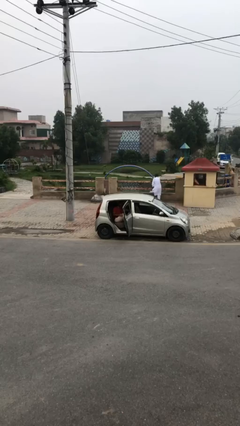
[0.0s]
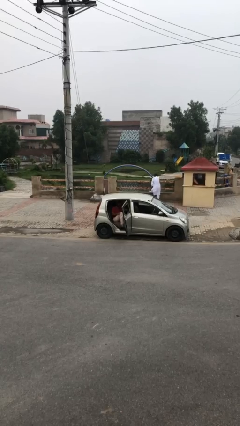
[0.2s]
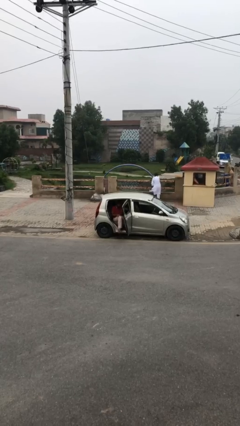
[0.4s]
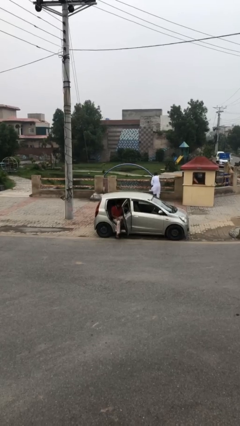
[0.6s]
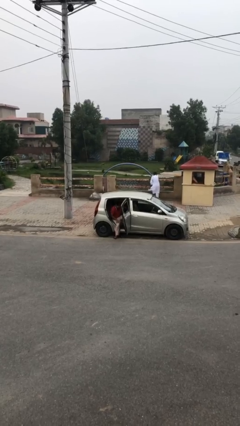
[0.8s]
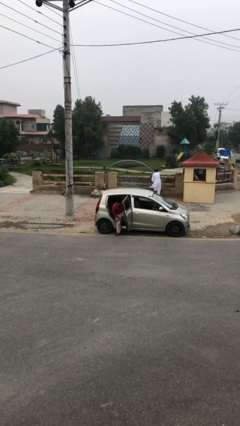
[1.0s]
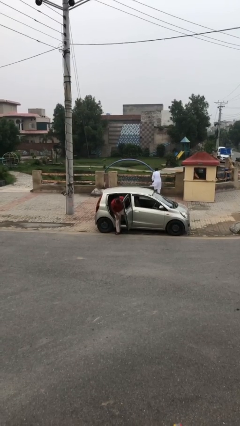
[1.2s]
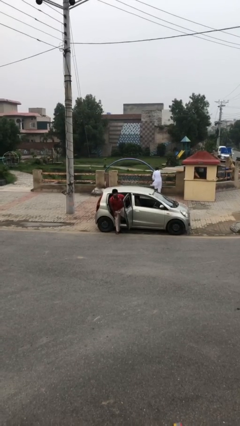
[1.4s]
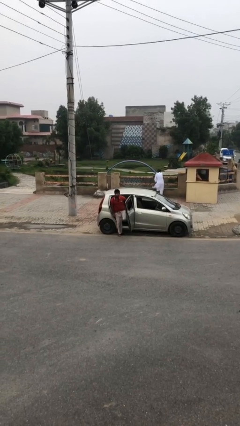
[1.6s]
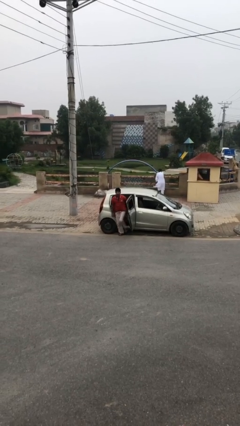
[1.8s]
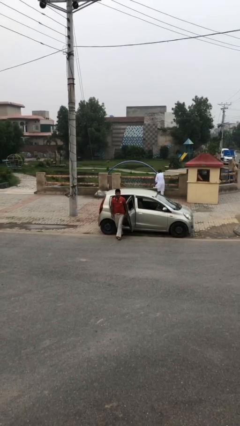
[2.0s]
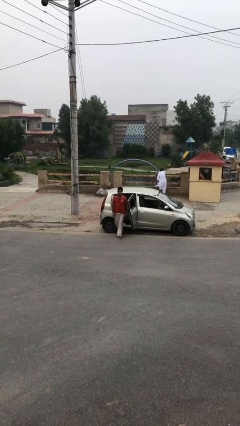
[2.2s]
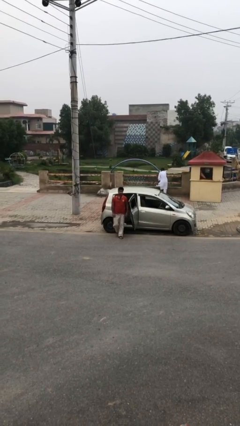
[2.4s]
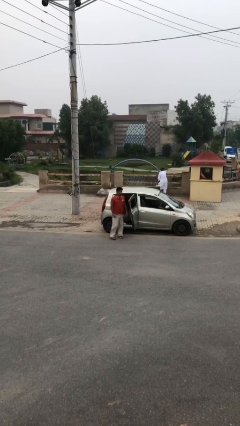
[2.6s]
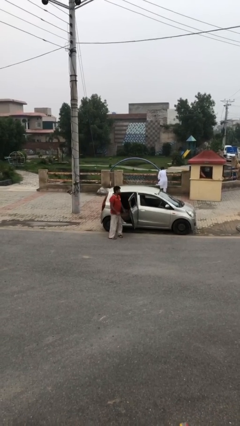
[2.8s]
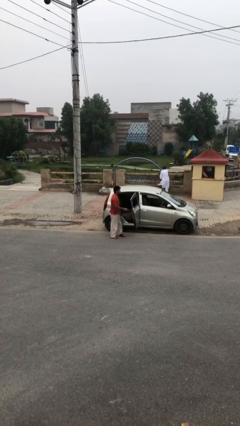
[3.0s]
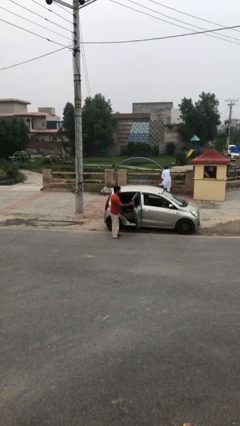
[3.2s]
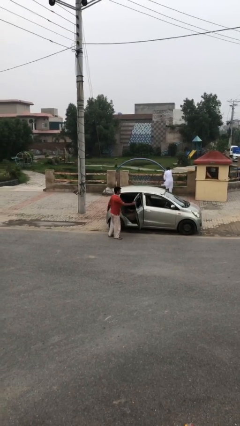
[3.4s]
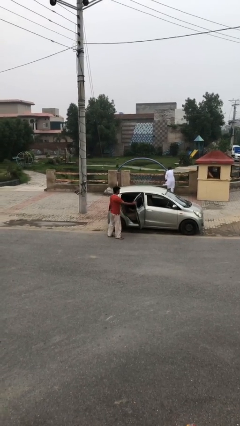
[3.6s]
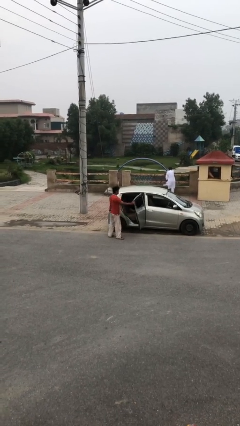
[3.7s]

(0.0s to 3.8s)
person exits car

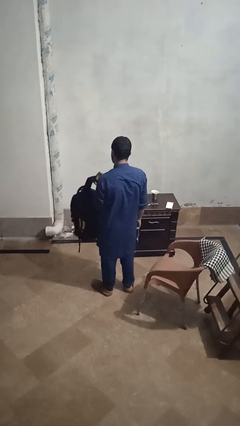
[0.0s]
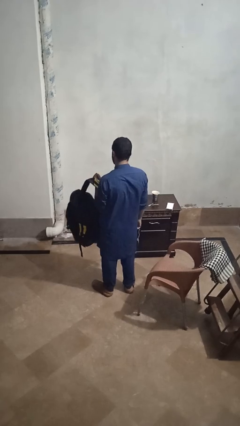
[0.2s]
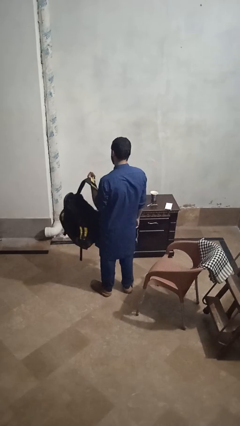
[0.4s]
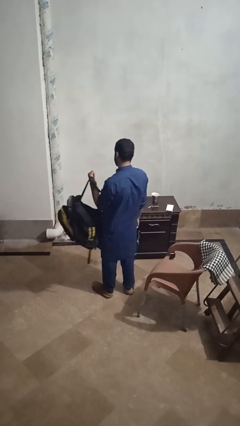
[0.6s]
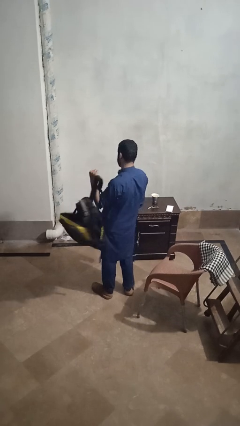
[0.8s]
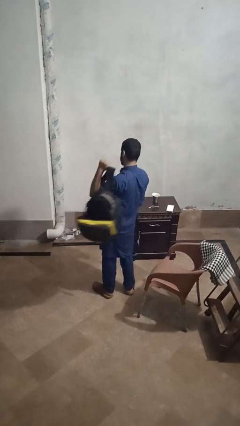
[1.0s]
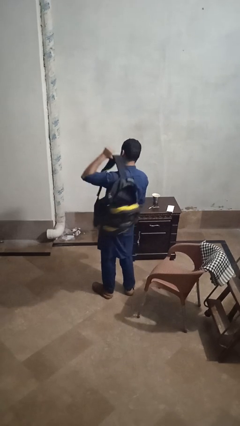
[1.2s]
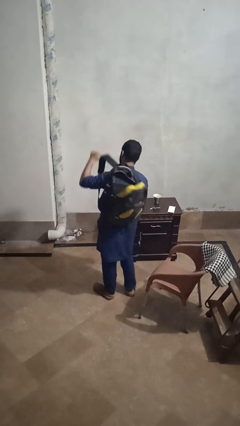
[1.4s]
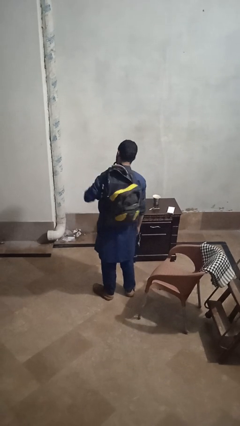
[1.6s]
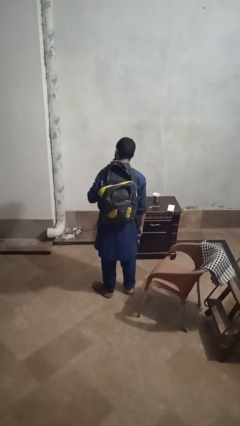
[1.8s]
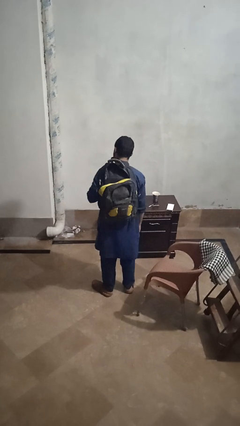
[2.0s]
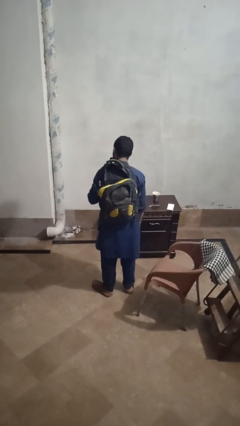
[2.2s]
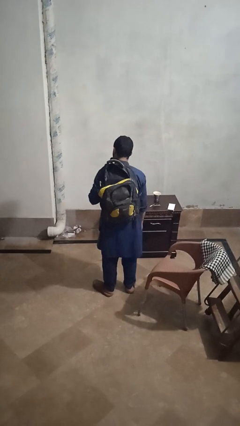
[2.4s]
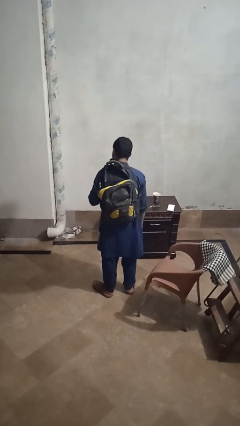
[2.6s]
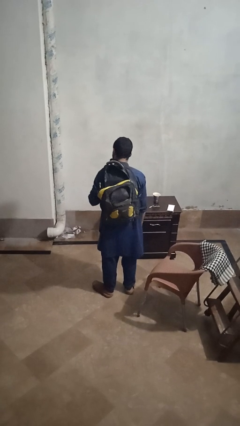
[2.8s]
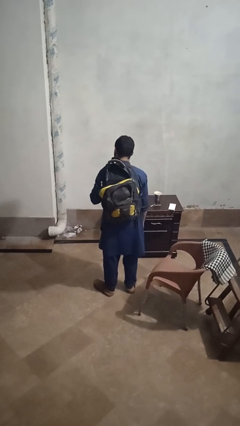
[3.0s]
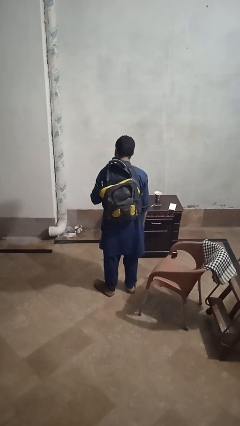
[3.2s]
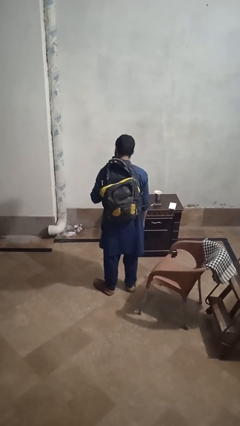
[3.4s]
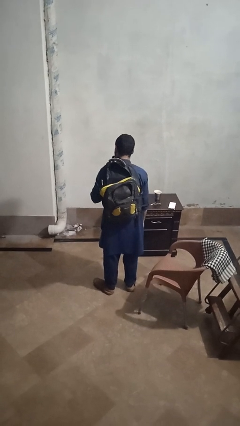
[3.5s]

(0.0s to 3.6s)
person puts on backpack

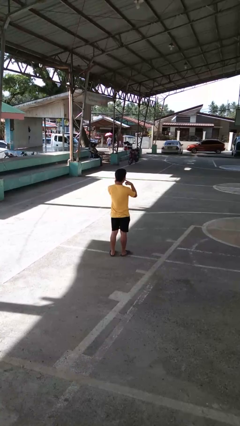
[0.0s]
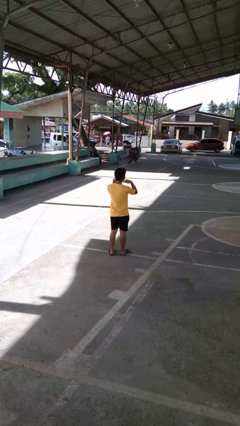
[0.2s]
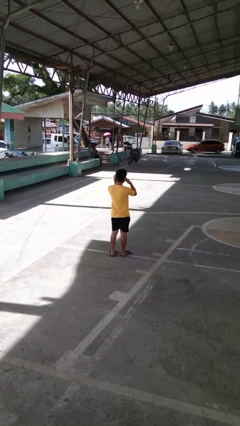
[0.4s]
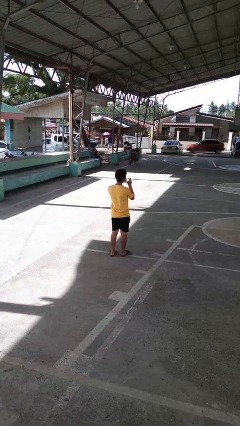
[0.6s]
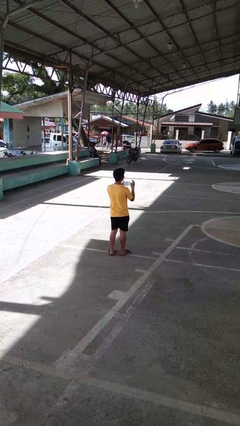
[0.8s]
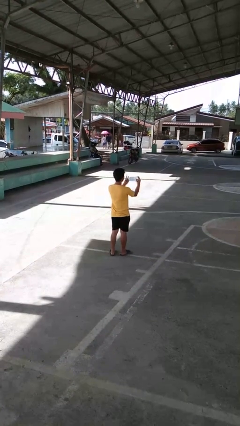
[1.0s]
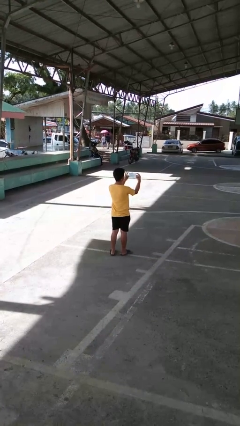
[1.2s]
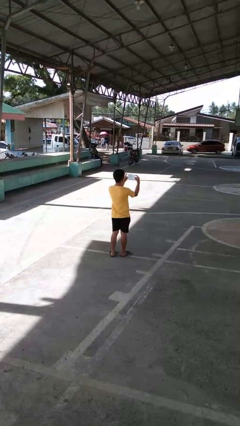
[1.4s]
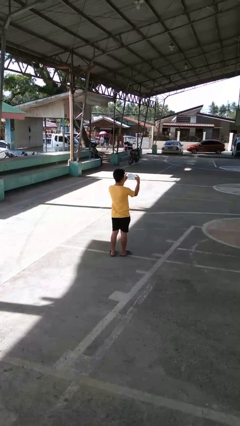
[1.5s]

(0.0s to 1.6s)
person takes off facemask

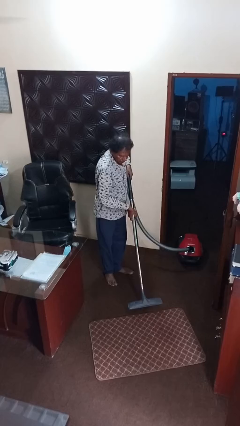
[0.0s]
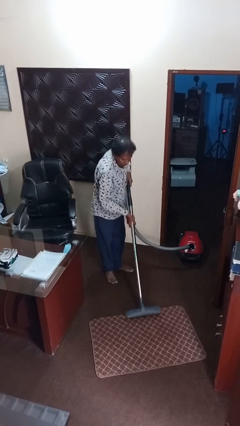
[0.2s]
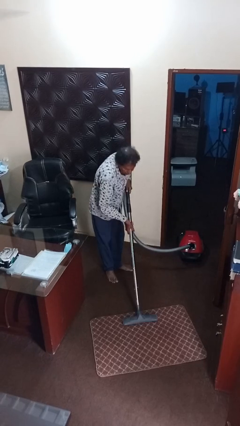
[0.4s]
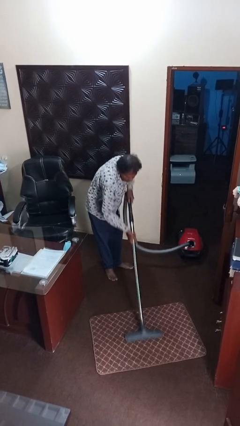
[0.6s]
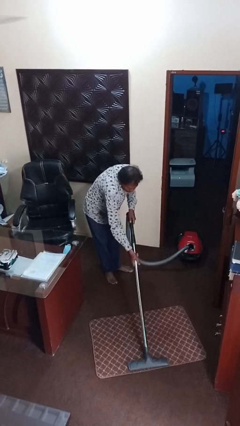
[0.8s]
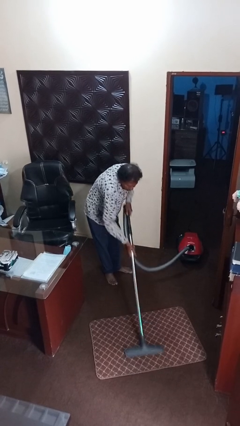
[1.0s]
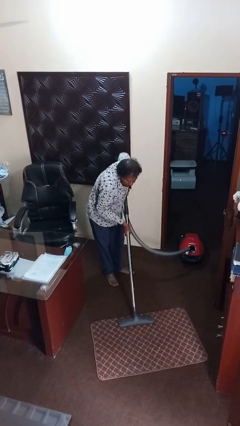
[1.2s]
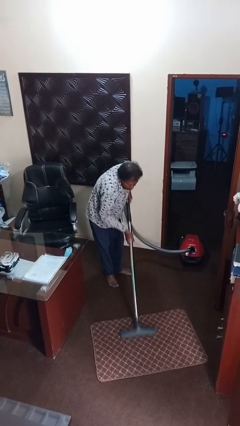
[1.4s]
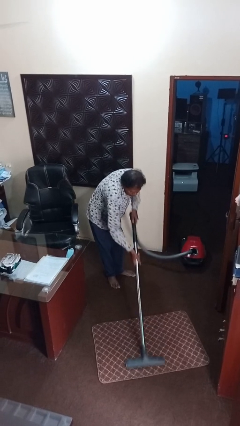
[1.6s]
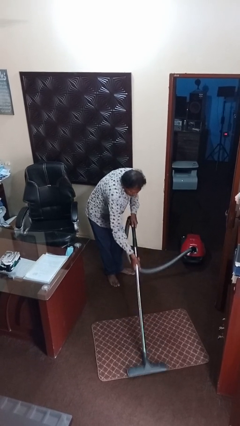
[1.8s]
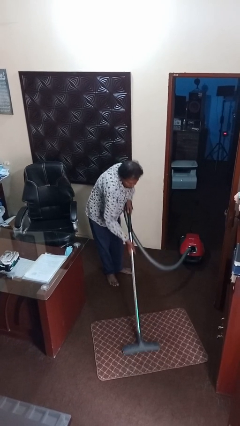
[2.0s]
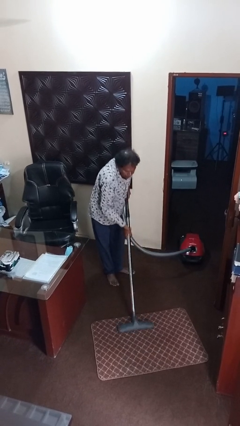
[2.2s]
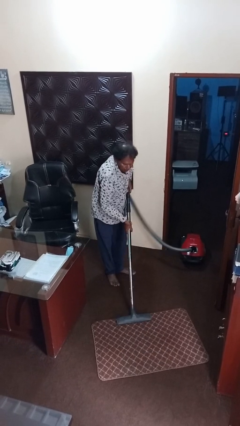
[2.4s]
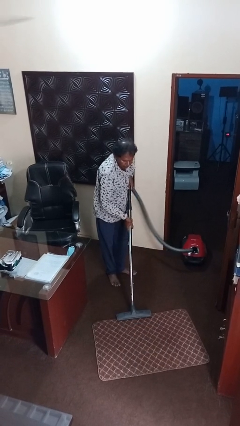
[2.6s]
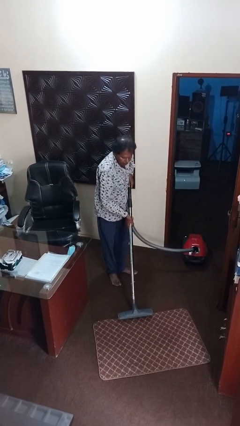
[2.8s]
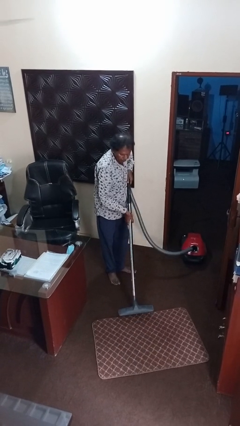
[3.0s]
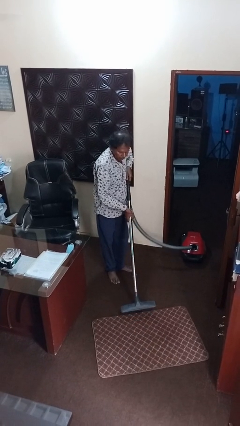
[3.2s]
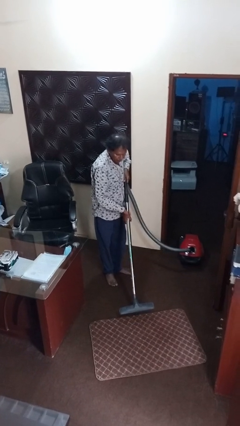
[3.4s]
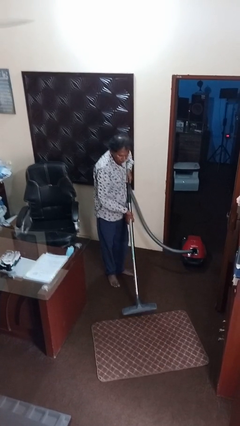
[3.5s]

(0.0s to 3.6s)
person vacuums carpet

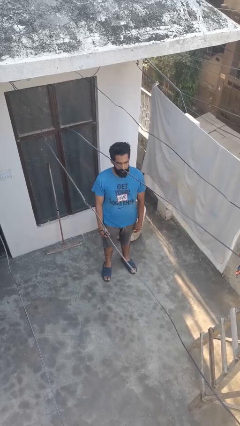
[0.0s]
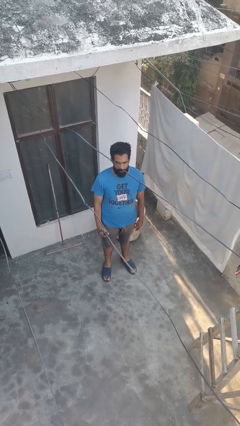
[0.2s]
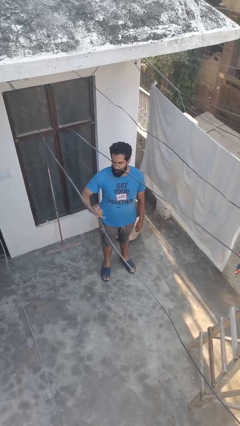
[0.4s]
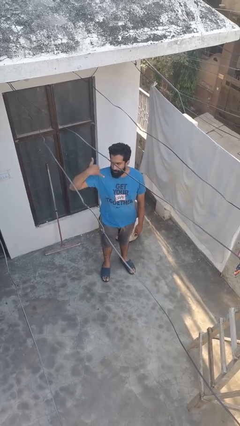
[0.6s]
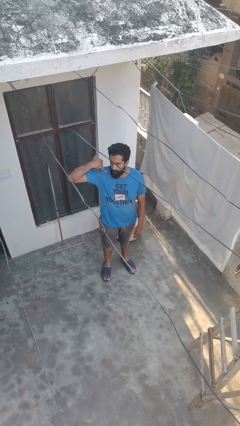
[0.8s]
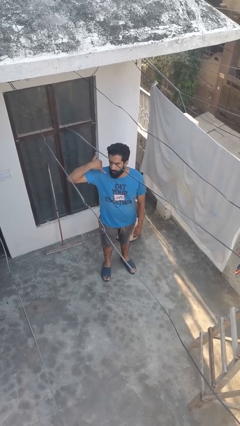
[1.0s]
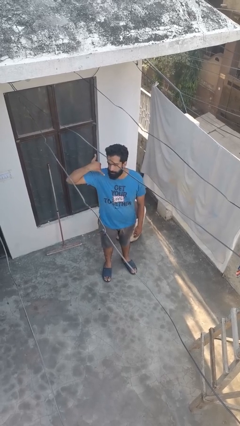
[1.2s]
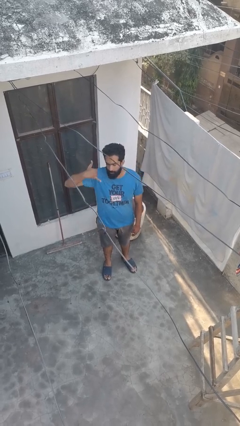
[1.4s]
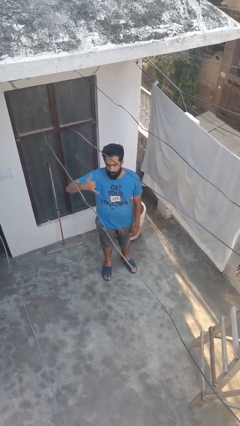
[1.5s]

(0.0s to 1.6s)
person gestures call me

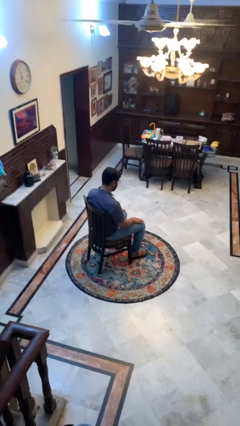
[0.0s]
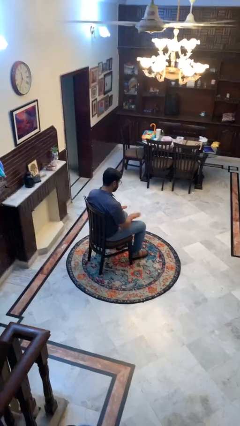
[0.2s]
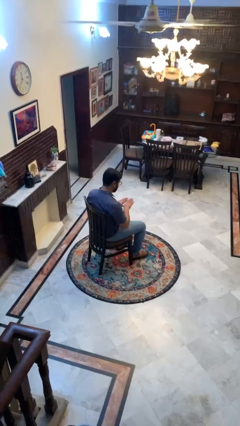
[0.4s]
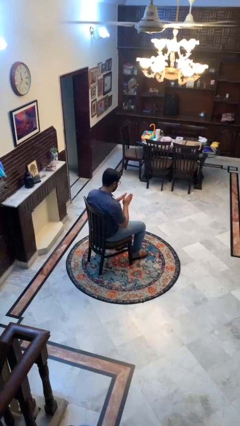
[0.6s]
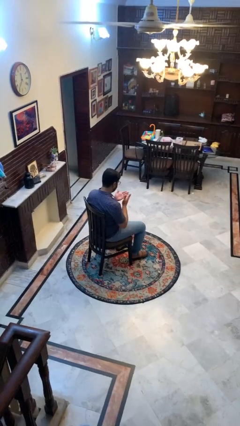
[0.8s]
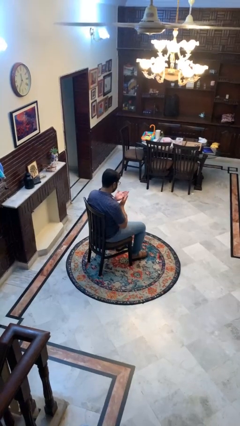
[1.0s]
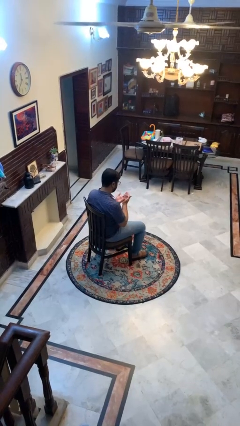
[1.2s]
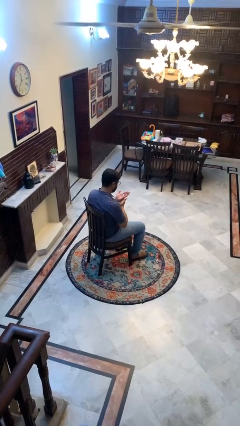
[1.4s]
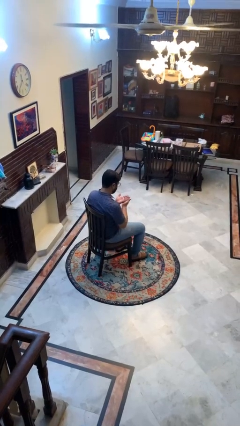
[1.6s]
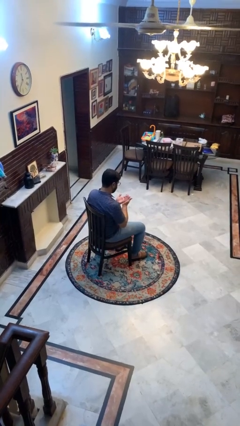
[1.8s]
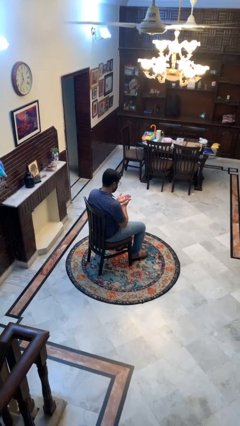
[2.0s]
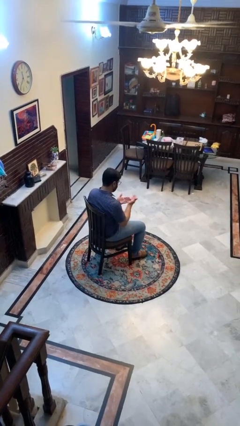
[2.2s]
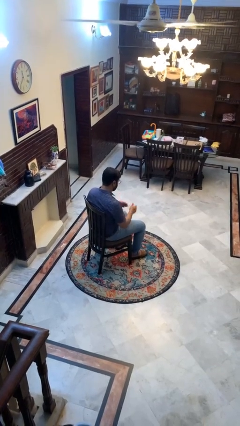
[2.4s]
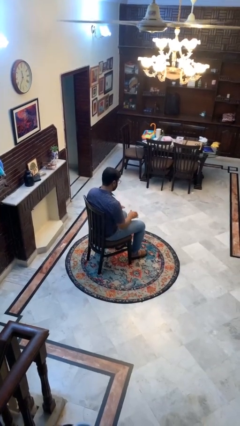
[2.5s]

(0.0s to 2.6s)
person looks at hands in lap

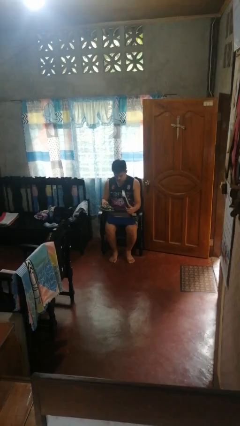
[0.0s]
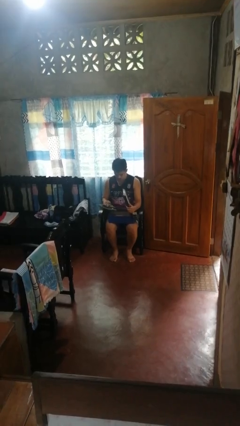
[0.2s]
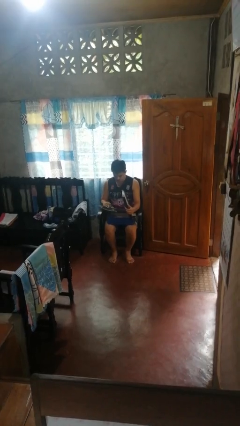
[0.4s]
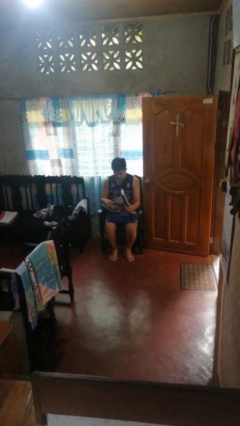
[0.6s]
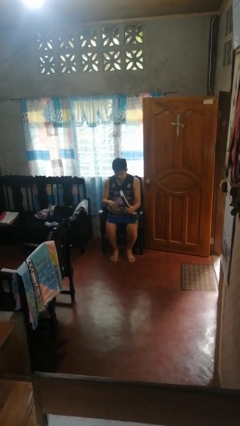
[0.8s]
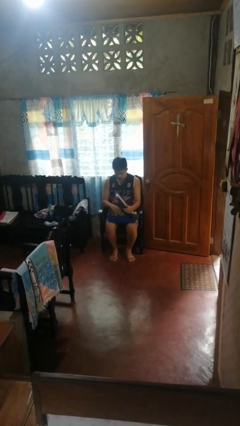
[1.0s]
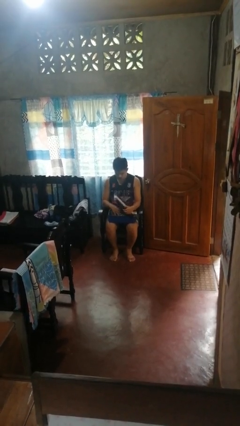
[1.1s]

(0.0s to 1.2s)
person puts object into box
